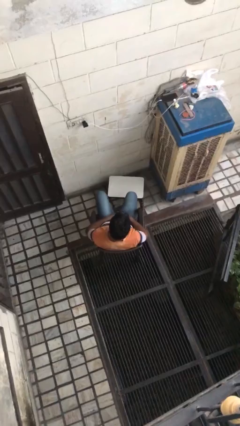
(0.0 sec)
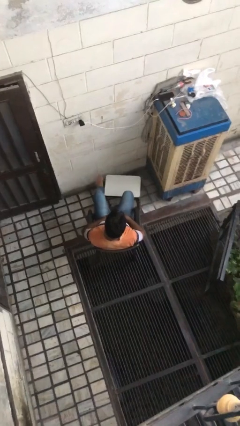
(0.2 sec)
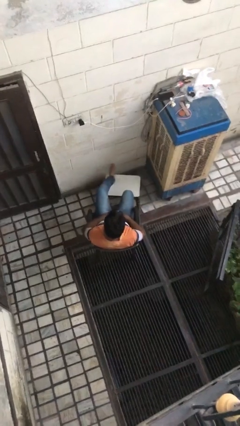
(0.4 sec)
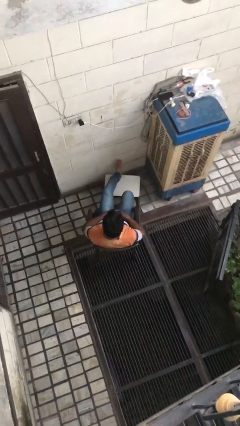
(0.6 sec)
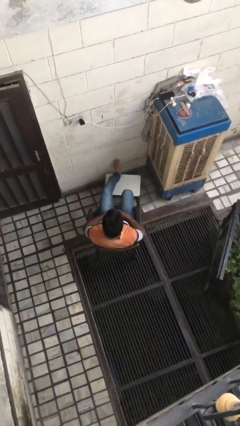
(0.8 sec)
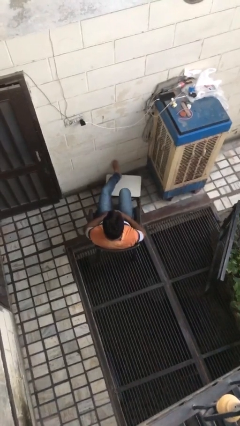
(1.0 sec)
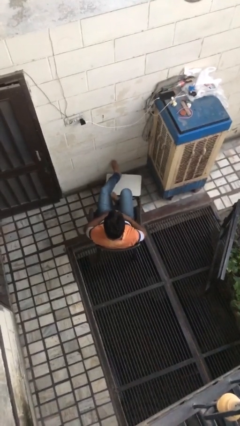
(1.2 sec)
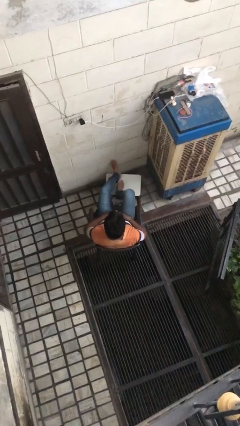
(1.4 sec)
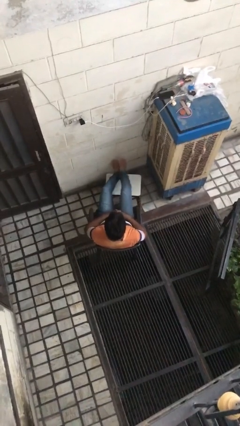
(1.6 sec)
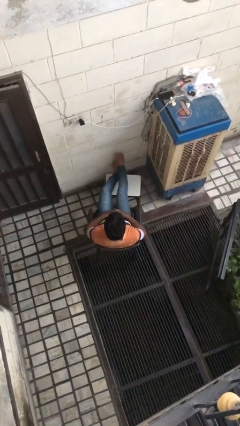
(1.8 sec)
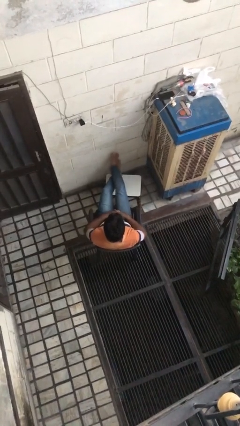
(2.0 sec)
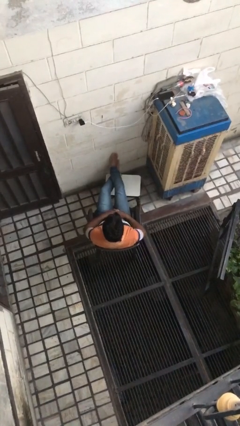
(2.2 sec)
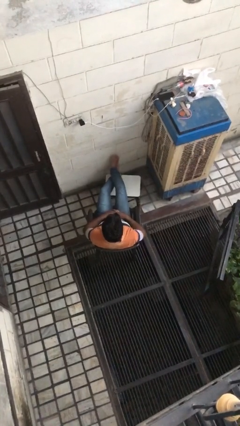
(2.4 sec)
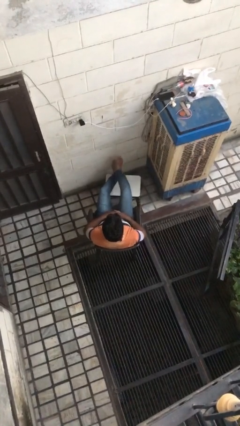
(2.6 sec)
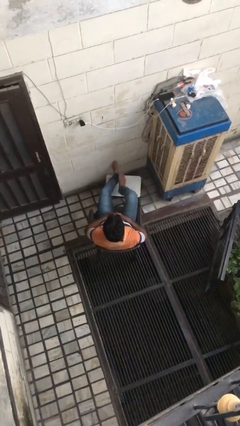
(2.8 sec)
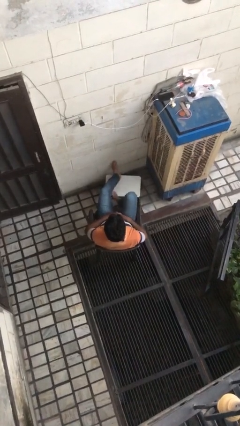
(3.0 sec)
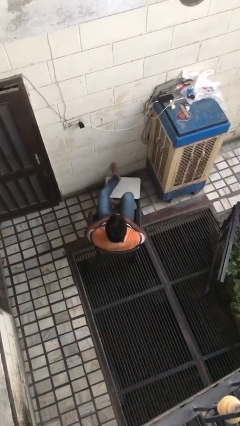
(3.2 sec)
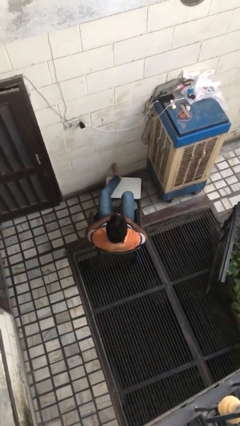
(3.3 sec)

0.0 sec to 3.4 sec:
person puts feet up

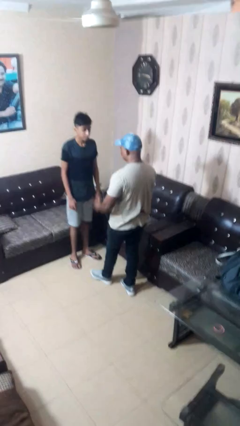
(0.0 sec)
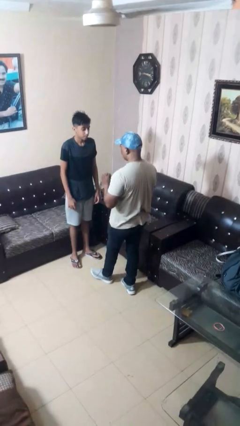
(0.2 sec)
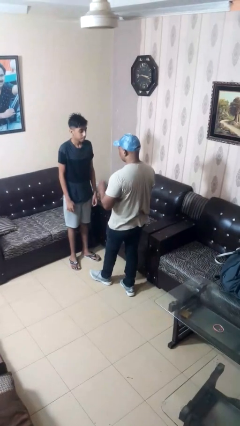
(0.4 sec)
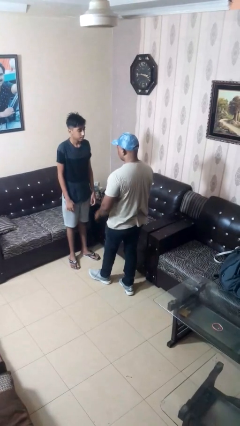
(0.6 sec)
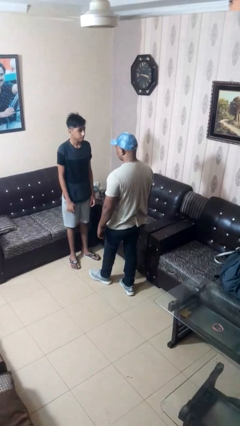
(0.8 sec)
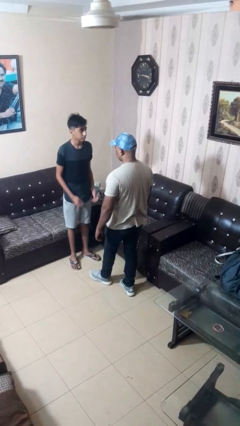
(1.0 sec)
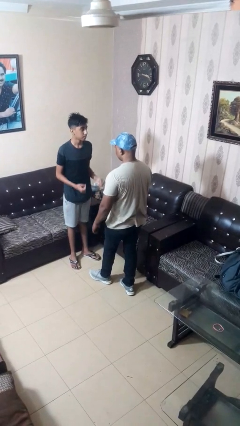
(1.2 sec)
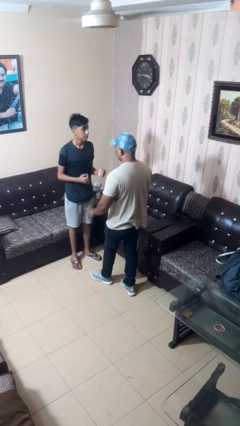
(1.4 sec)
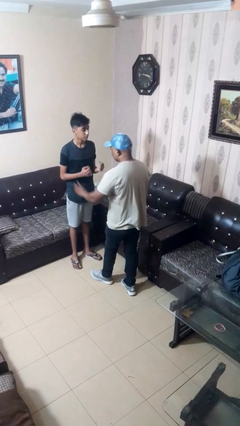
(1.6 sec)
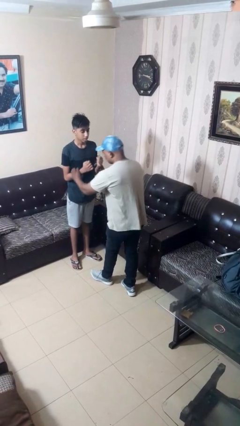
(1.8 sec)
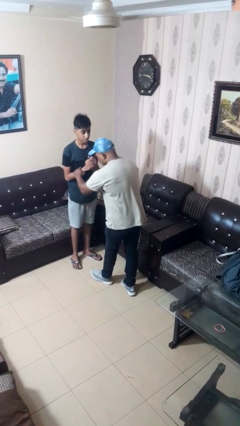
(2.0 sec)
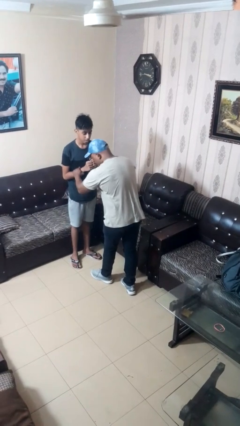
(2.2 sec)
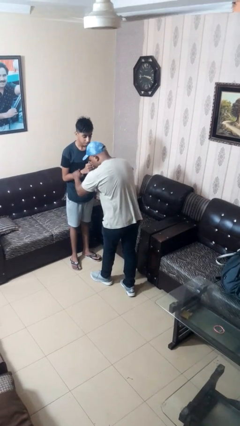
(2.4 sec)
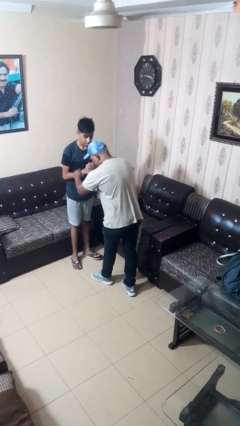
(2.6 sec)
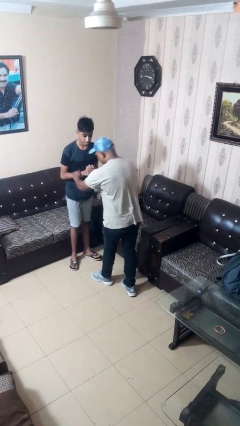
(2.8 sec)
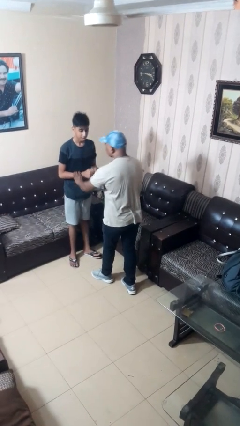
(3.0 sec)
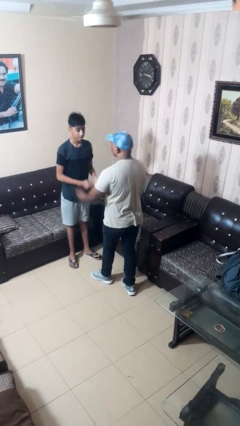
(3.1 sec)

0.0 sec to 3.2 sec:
person grabs person by forearm

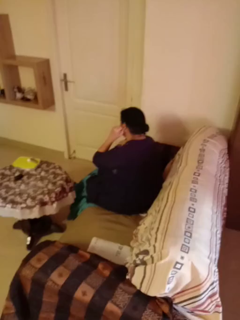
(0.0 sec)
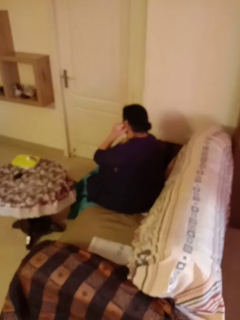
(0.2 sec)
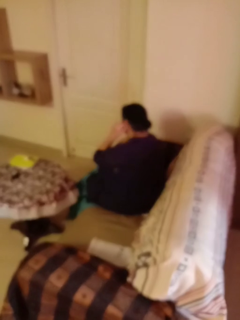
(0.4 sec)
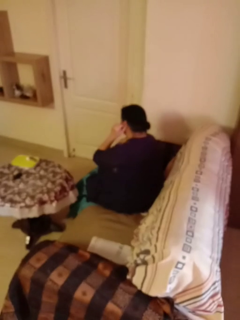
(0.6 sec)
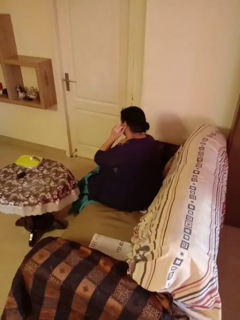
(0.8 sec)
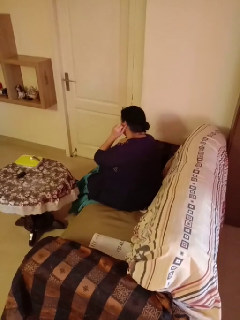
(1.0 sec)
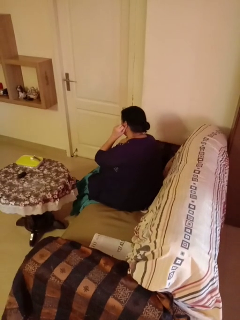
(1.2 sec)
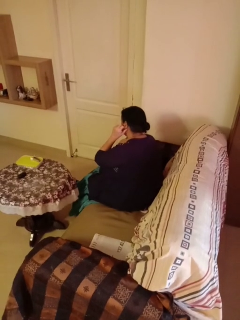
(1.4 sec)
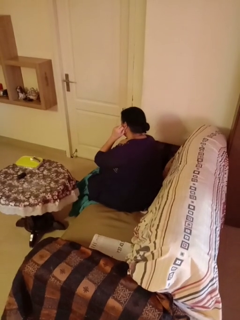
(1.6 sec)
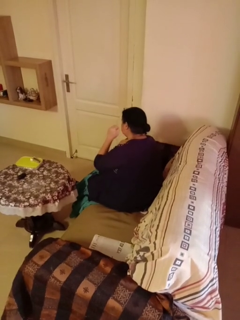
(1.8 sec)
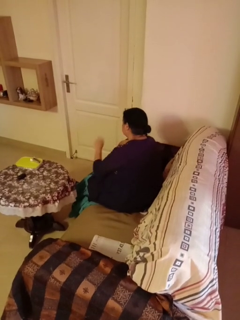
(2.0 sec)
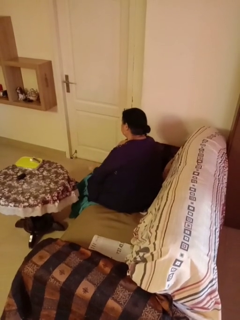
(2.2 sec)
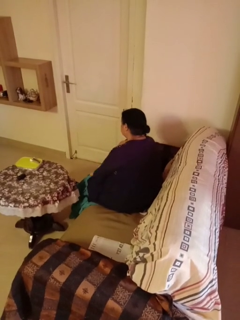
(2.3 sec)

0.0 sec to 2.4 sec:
person touches earlobe

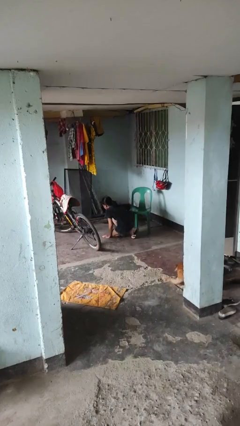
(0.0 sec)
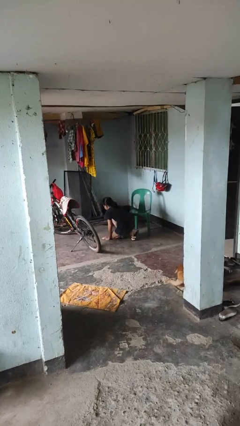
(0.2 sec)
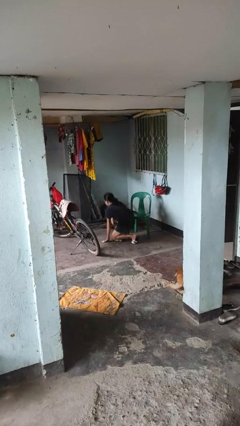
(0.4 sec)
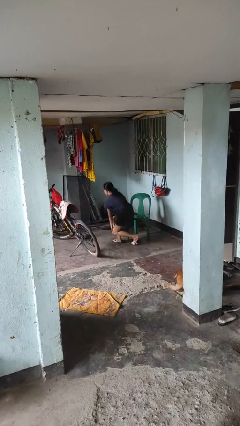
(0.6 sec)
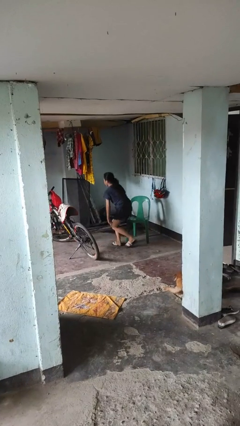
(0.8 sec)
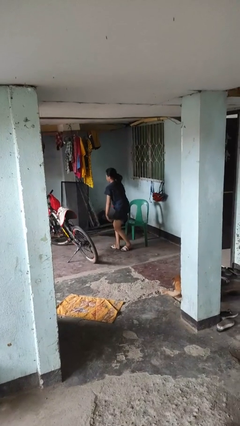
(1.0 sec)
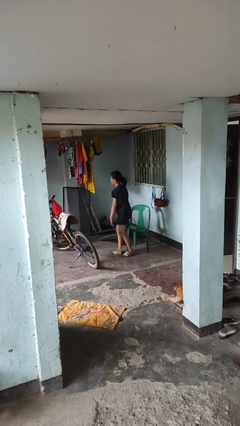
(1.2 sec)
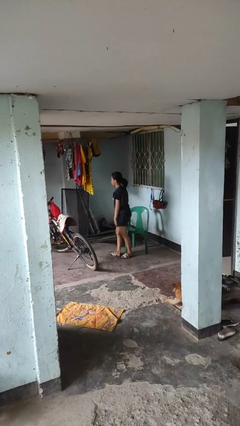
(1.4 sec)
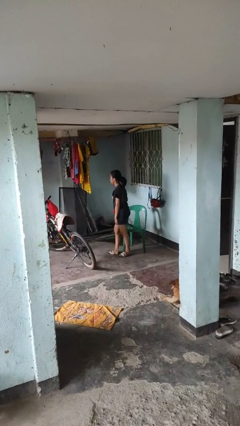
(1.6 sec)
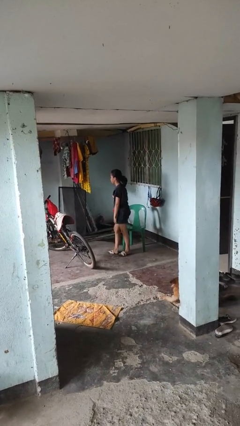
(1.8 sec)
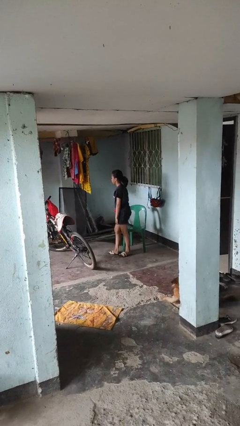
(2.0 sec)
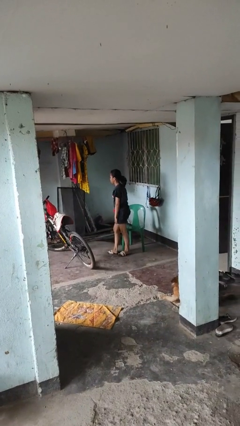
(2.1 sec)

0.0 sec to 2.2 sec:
person stands up from floor

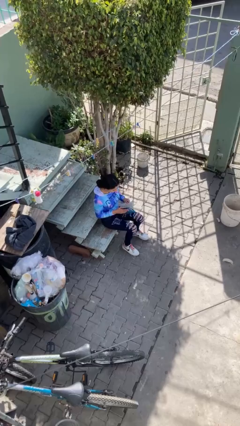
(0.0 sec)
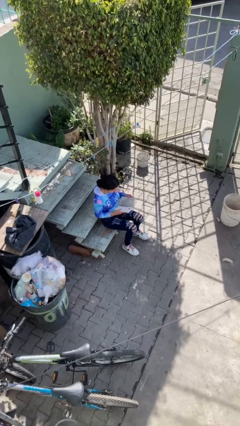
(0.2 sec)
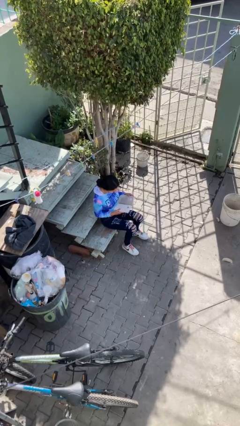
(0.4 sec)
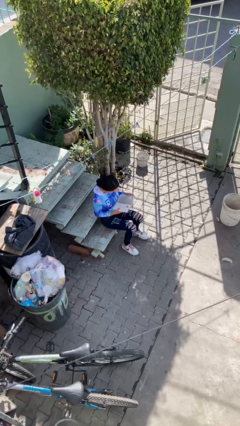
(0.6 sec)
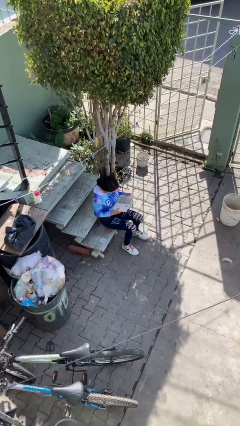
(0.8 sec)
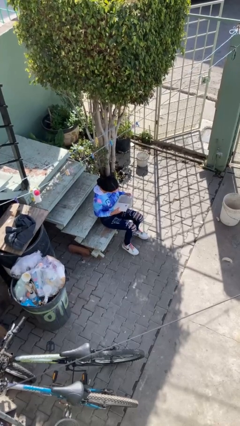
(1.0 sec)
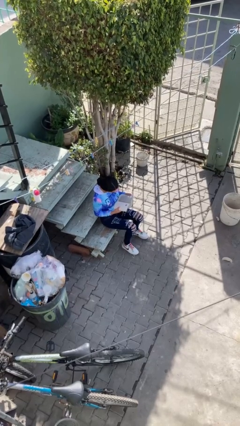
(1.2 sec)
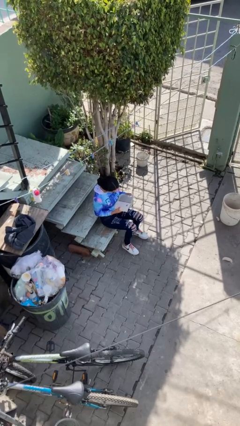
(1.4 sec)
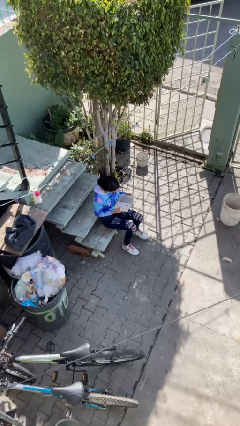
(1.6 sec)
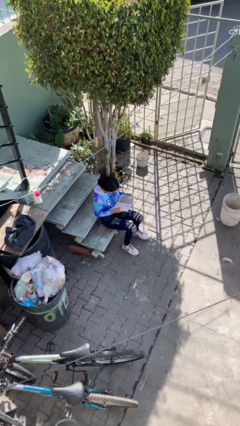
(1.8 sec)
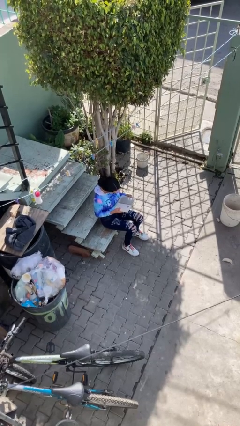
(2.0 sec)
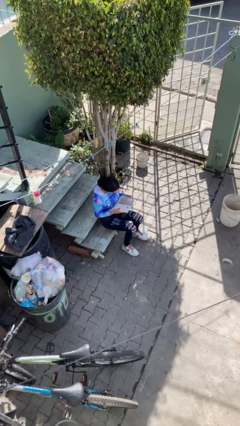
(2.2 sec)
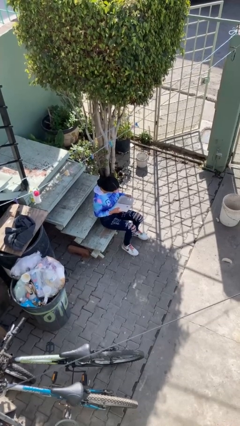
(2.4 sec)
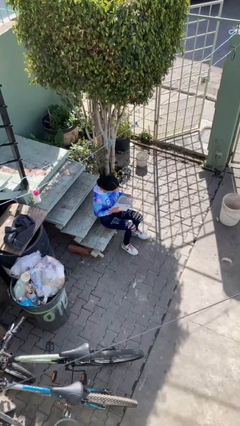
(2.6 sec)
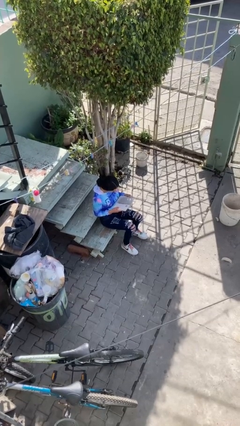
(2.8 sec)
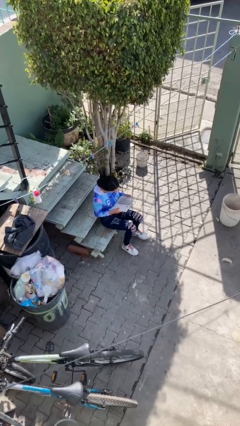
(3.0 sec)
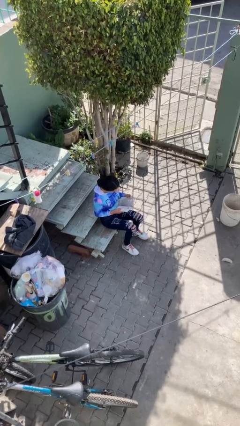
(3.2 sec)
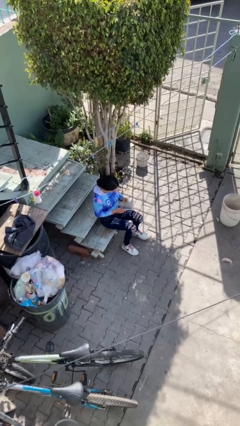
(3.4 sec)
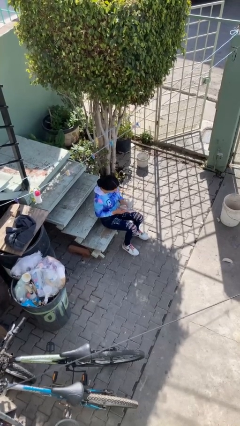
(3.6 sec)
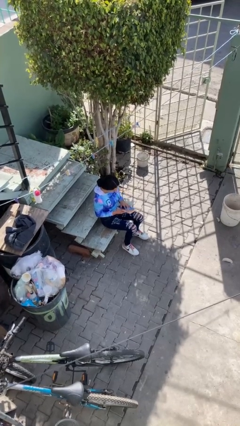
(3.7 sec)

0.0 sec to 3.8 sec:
person reads document

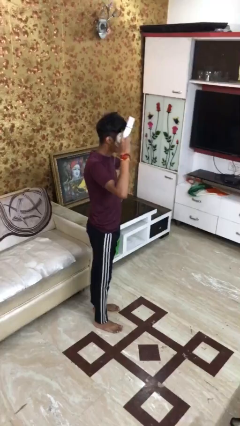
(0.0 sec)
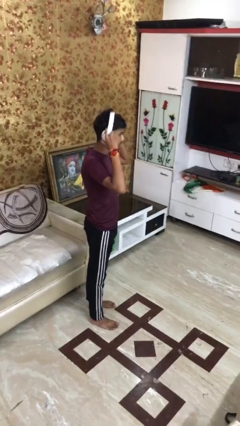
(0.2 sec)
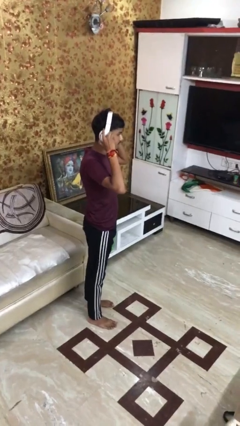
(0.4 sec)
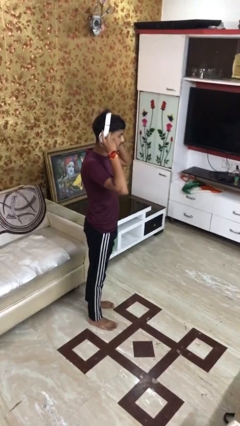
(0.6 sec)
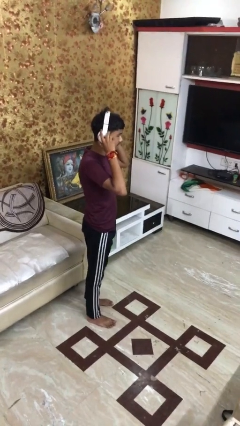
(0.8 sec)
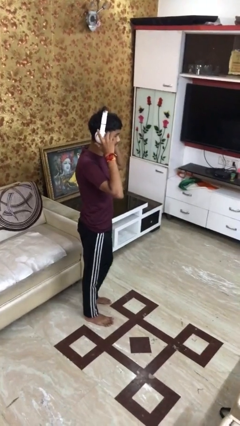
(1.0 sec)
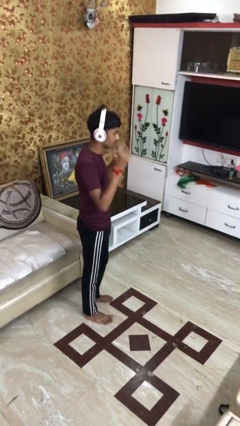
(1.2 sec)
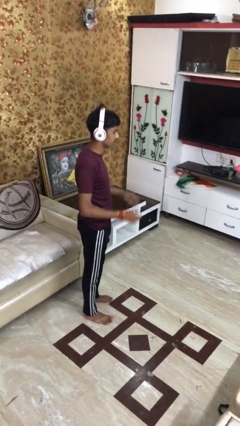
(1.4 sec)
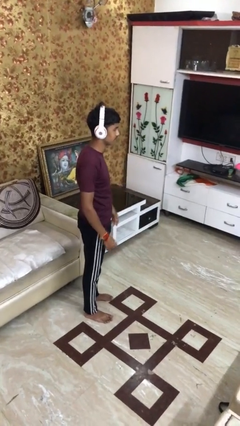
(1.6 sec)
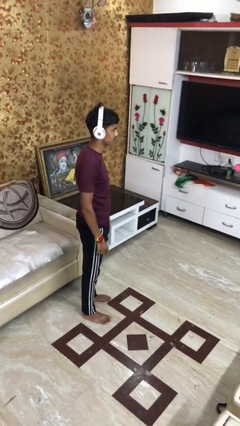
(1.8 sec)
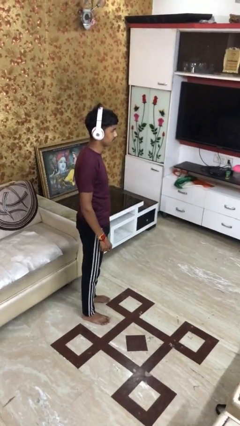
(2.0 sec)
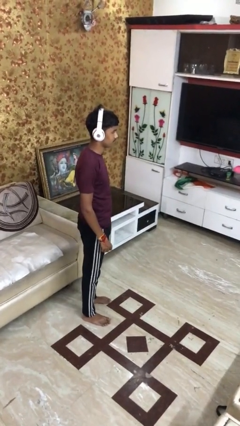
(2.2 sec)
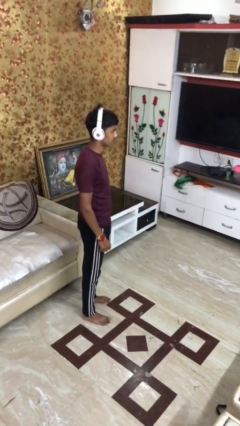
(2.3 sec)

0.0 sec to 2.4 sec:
person puts on headphones

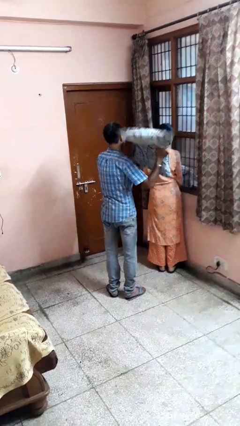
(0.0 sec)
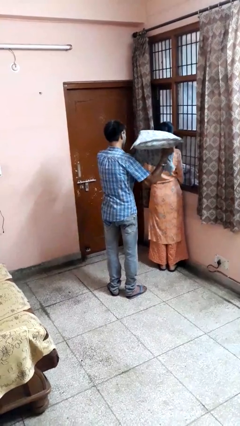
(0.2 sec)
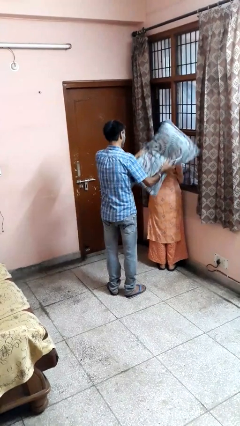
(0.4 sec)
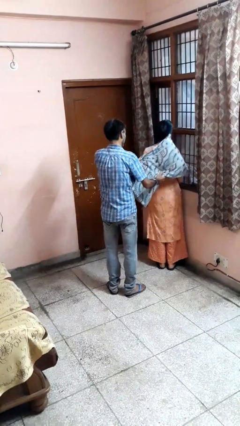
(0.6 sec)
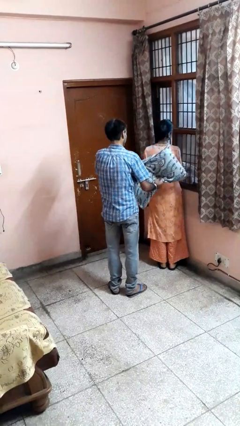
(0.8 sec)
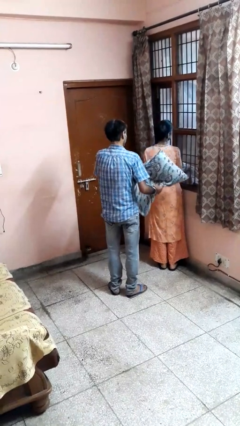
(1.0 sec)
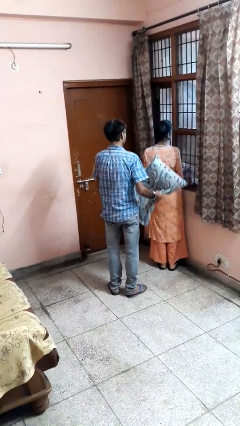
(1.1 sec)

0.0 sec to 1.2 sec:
person hits person with pillow
